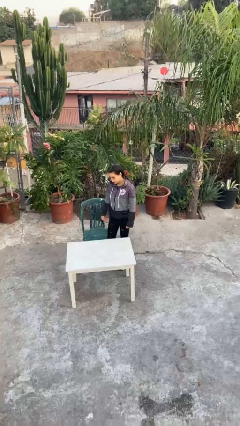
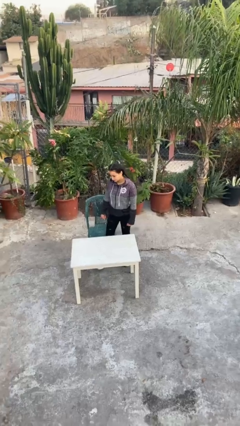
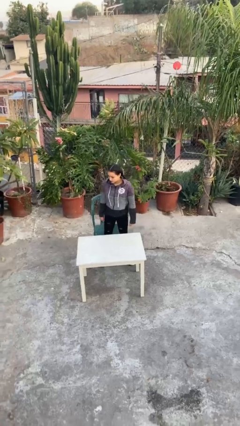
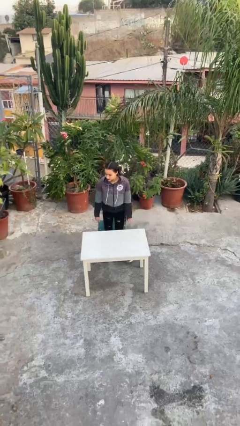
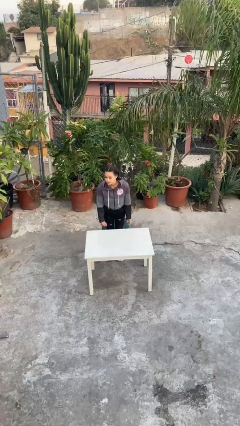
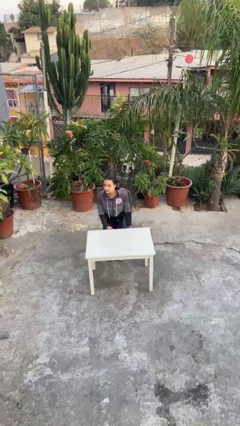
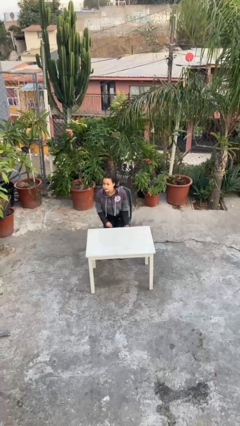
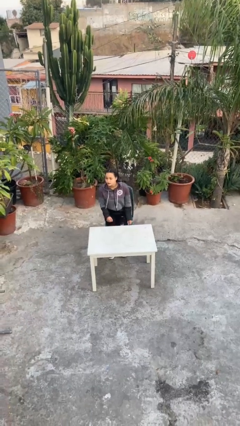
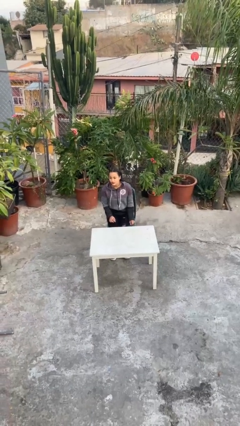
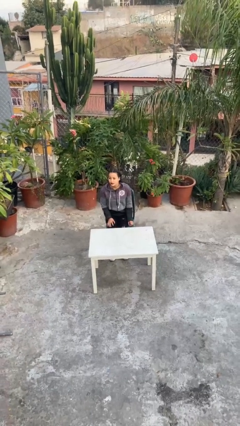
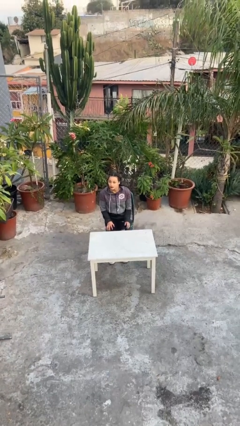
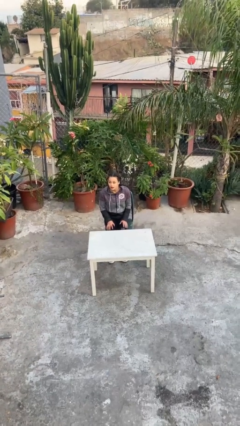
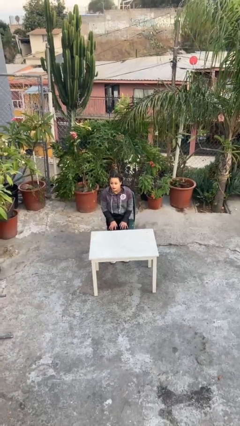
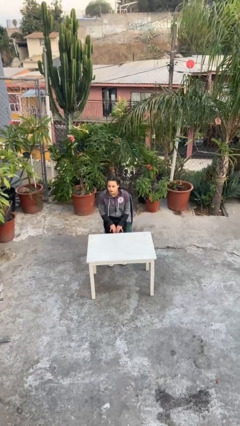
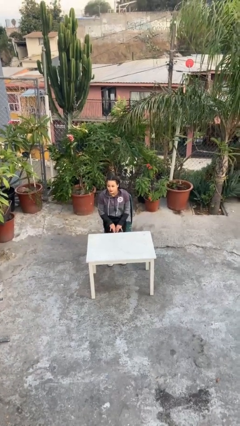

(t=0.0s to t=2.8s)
person sits down

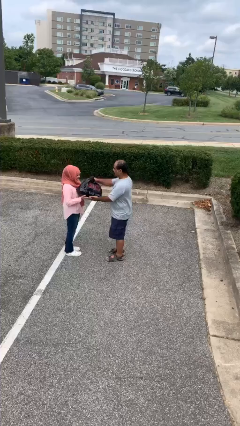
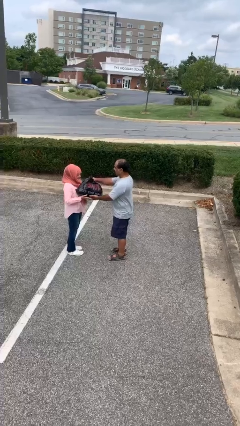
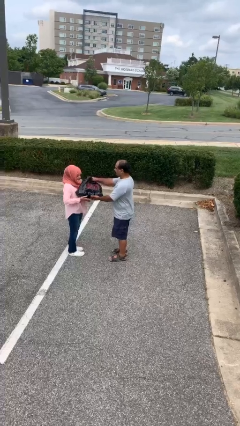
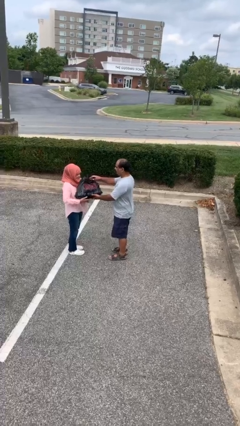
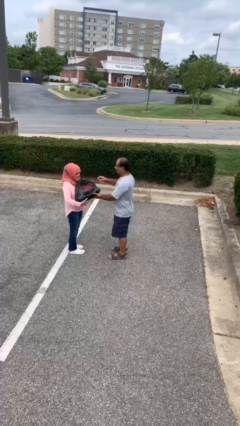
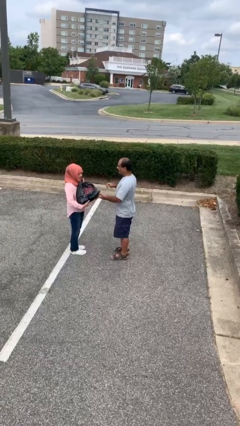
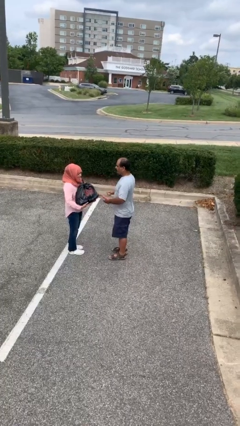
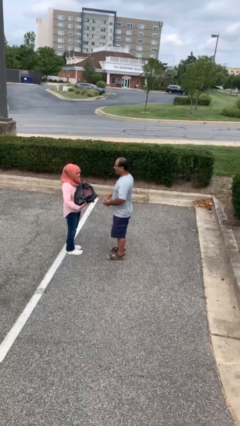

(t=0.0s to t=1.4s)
person transfers object to person

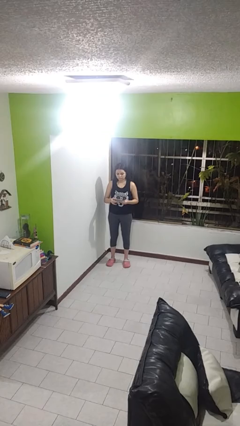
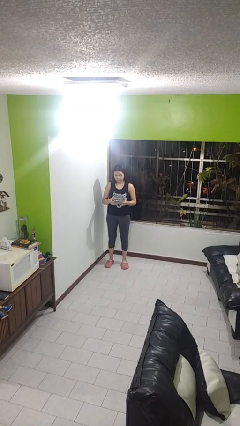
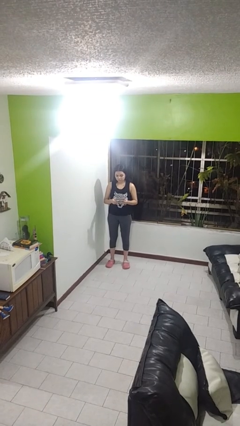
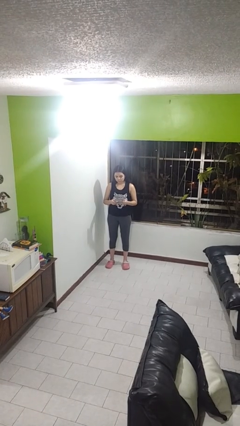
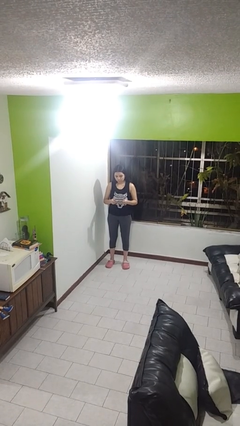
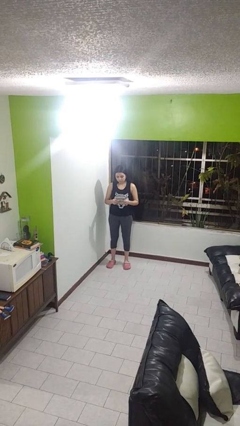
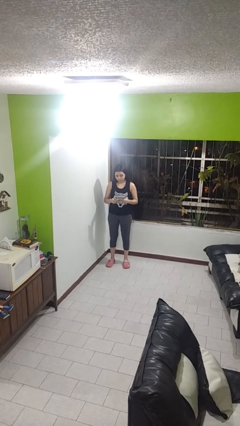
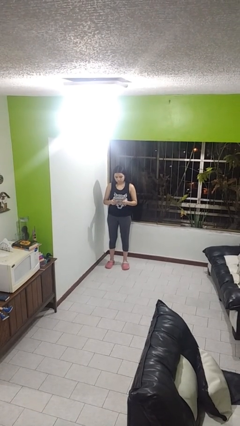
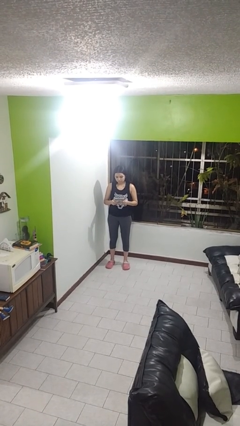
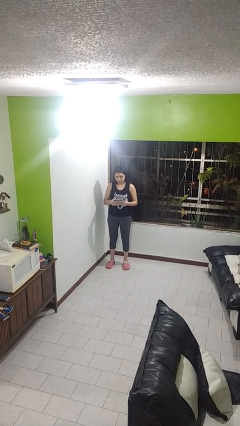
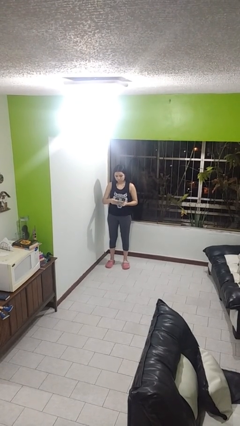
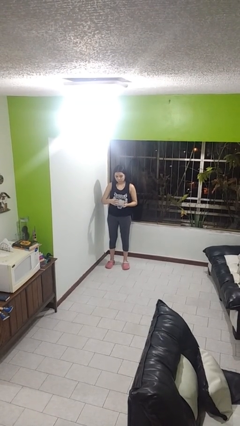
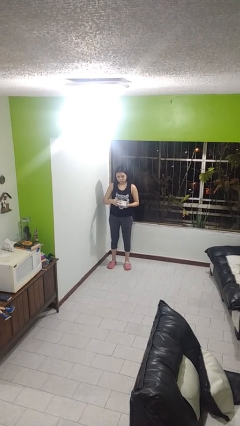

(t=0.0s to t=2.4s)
person interacts with handheld game

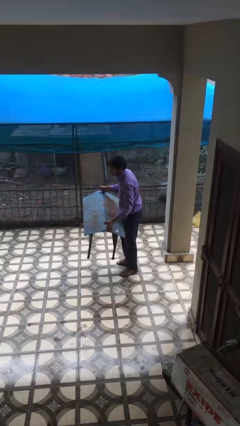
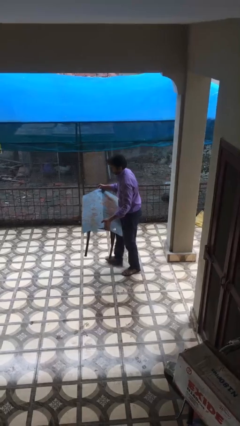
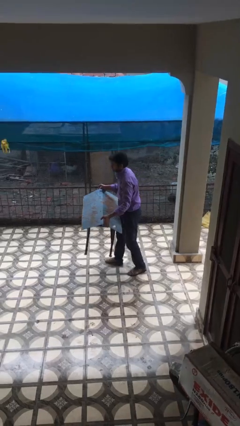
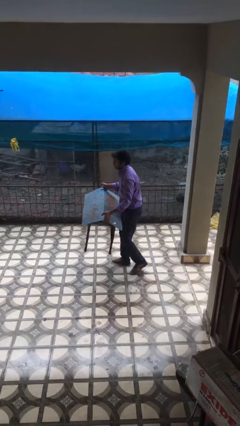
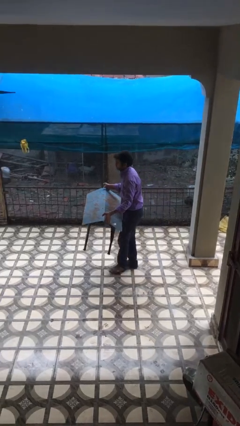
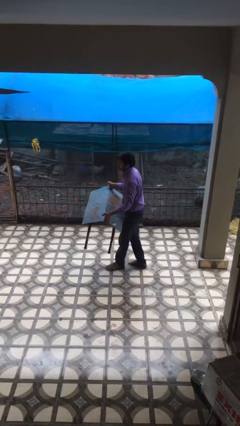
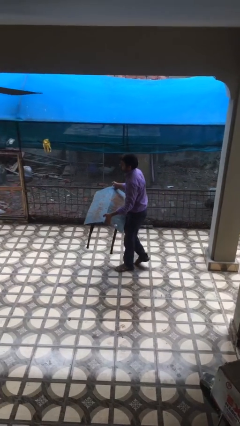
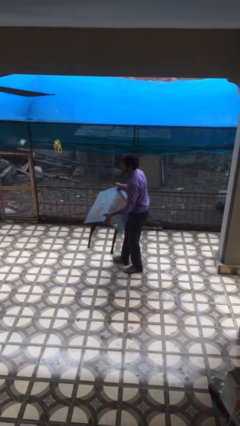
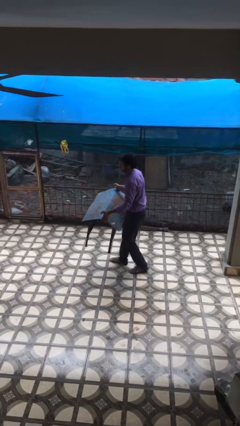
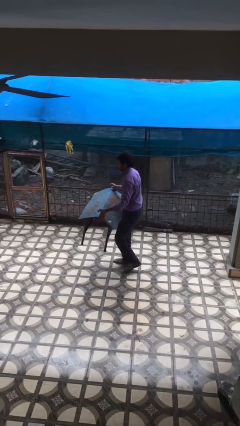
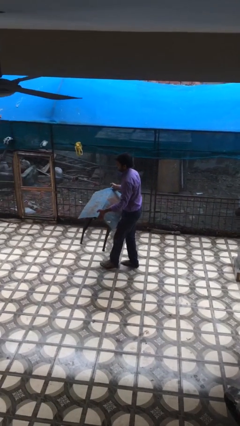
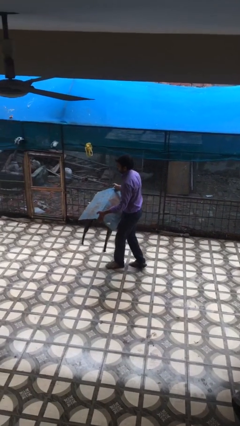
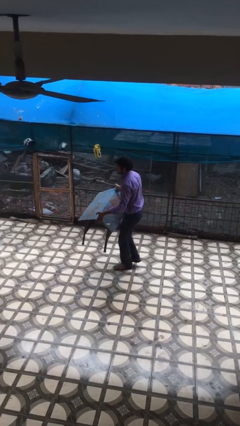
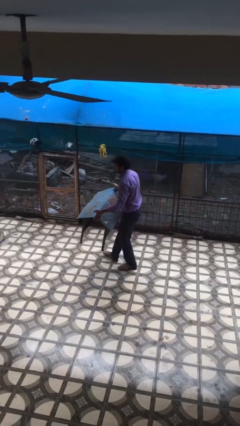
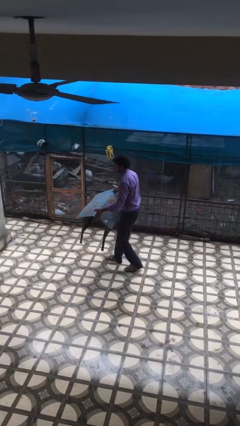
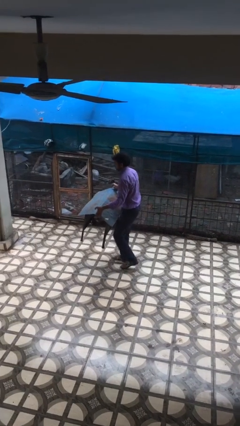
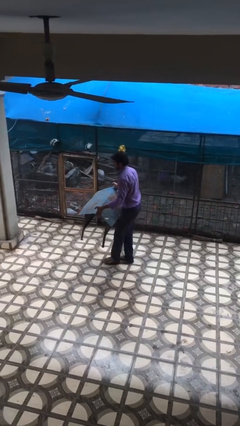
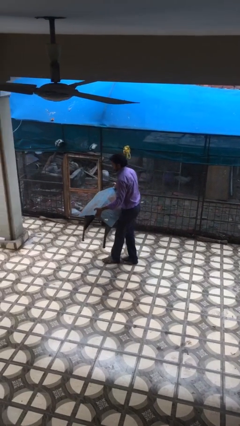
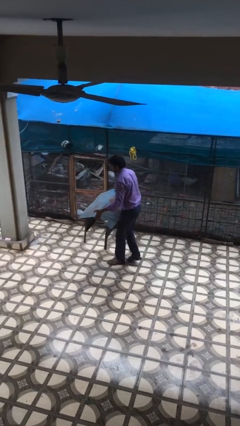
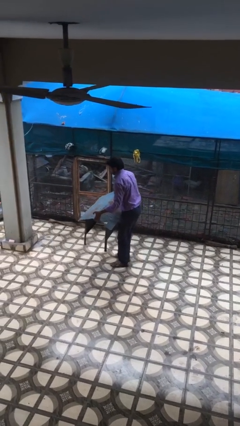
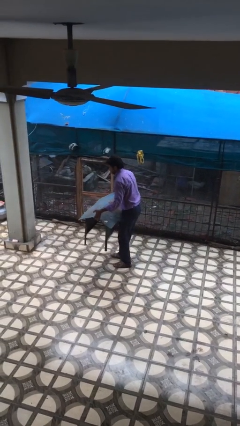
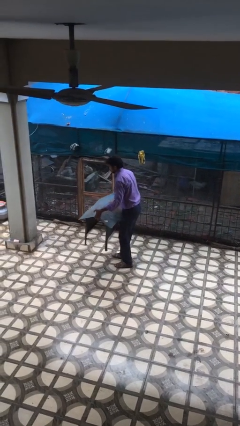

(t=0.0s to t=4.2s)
person carries heavy object

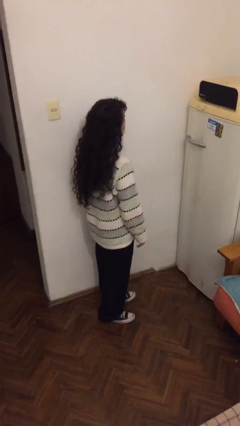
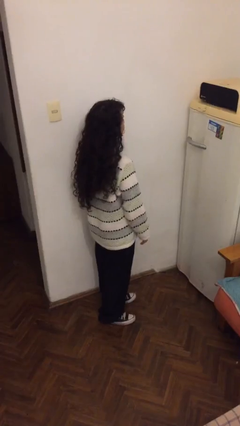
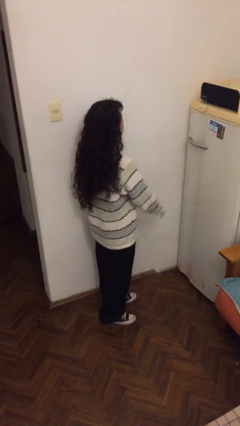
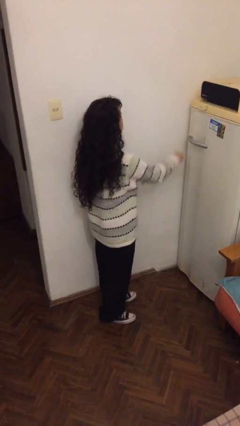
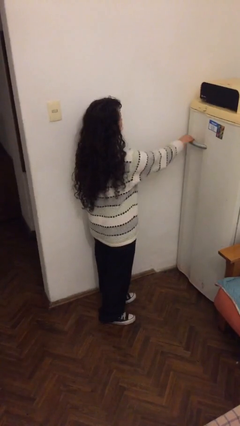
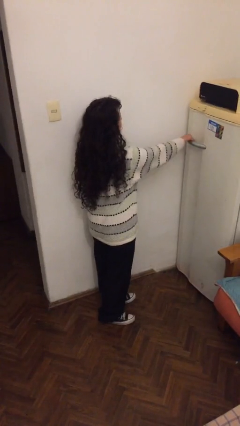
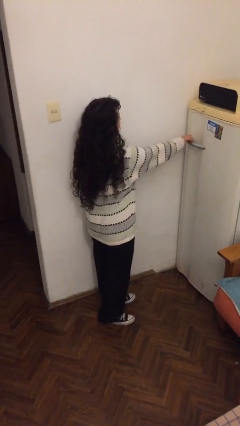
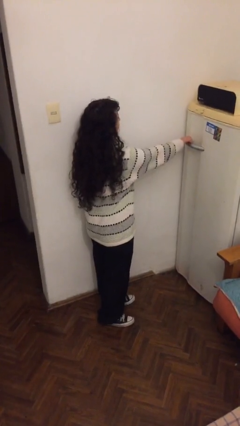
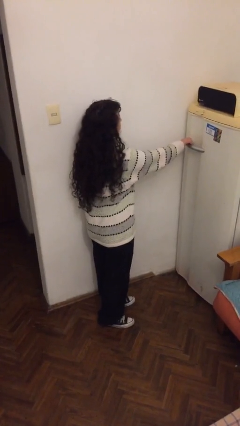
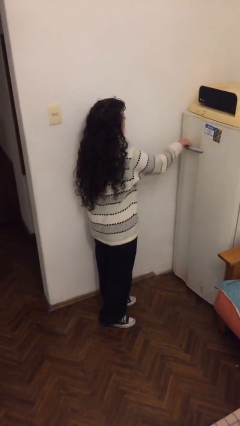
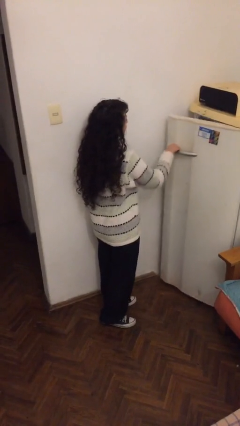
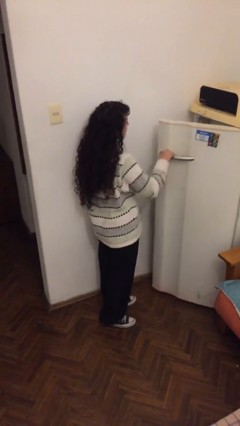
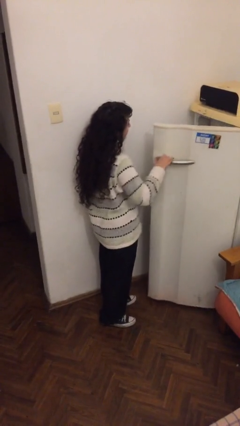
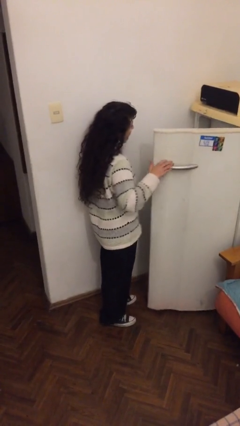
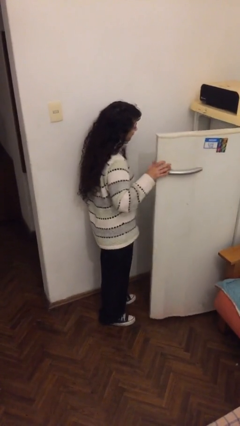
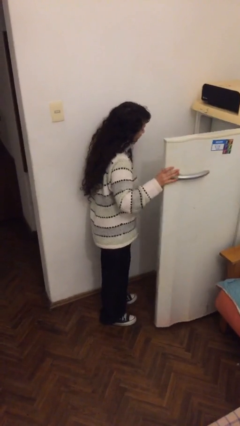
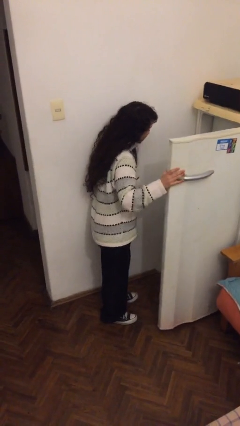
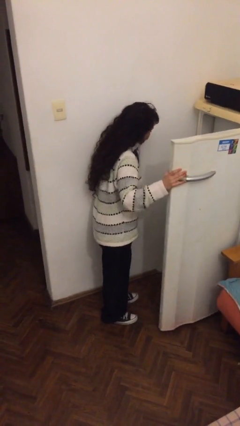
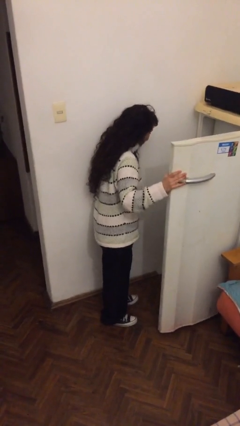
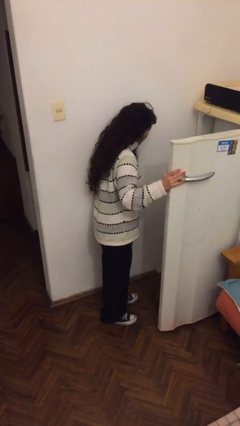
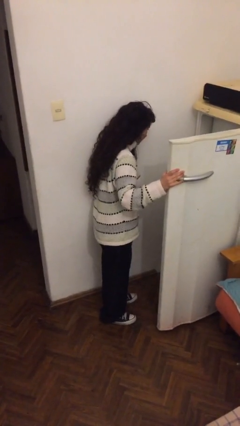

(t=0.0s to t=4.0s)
person opens refrigerator

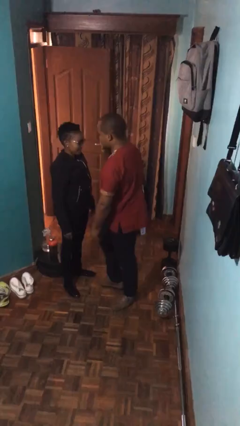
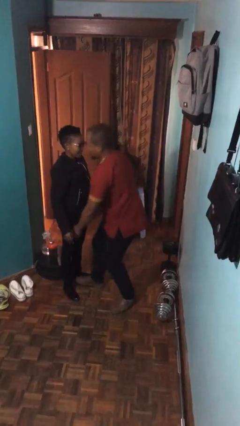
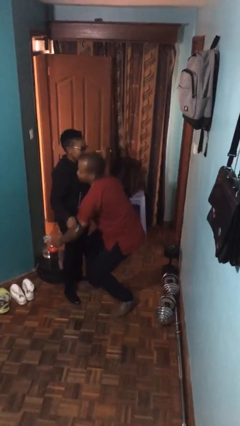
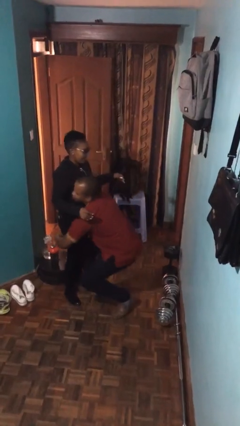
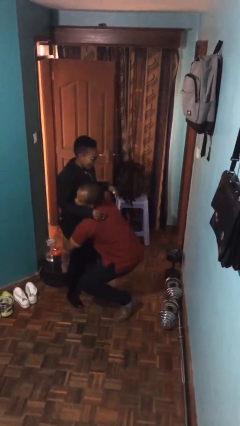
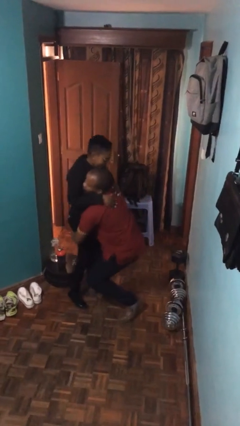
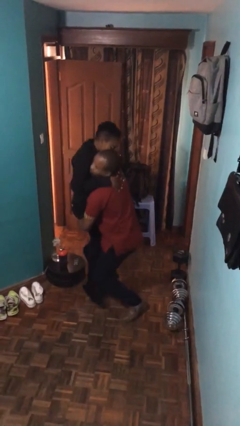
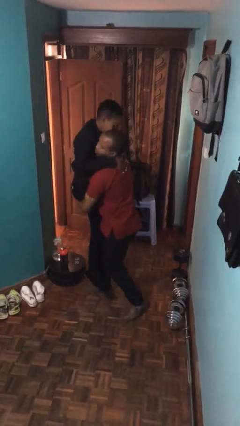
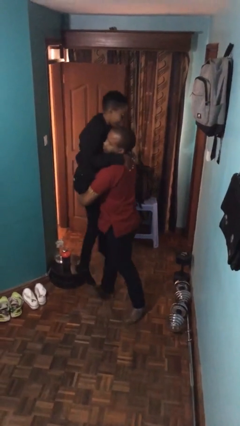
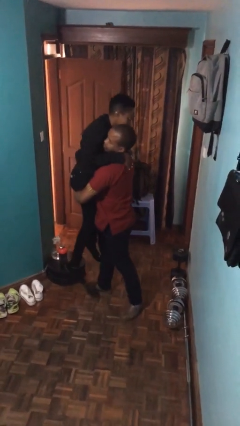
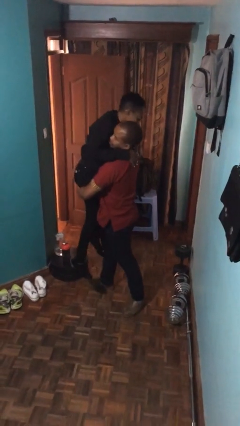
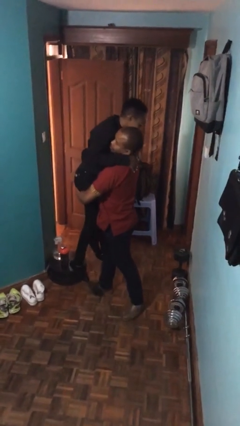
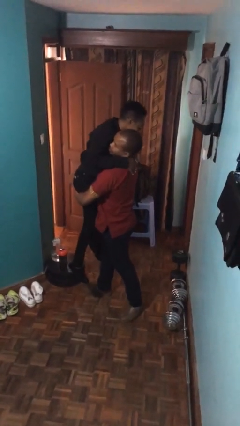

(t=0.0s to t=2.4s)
person picks up person
